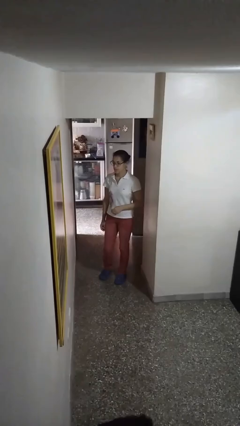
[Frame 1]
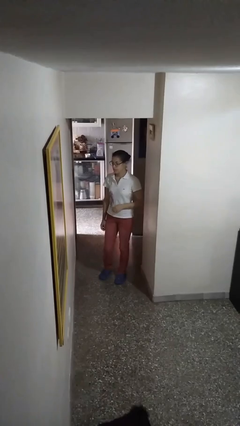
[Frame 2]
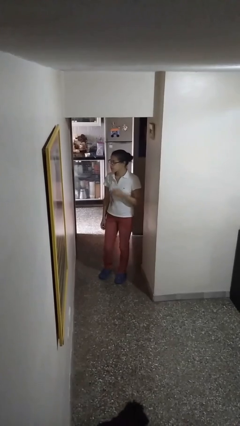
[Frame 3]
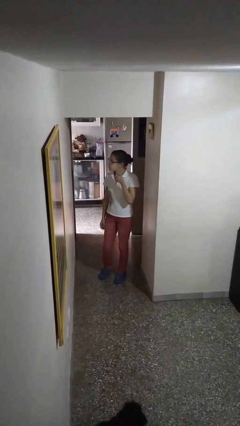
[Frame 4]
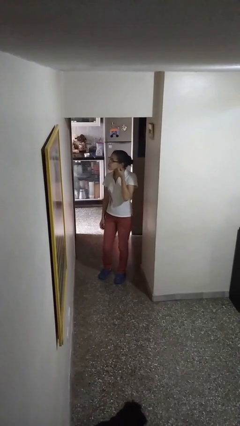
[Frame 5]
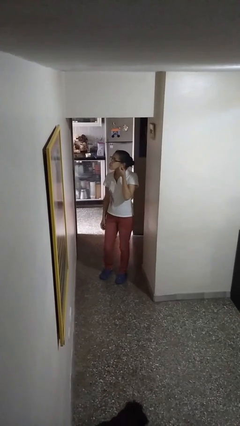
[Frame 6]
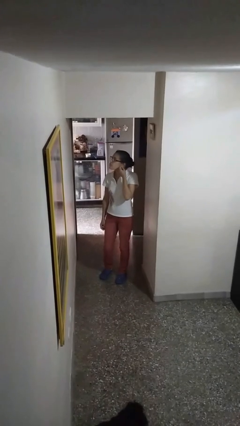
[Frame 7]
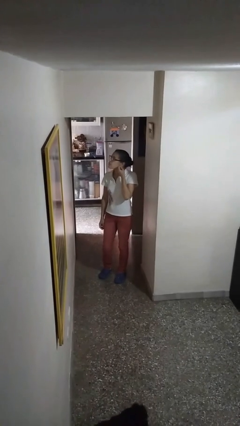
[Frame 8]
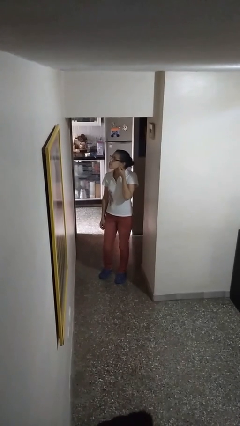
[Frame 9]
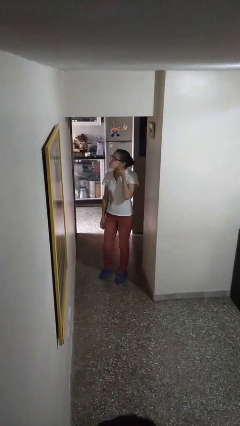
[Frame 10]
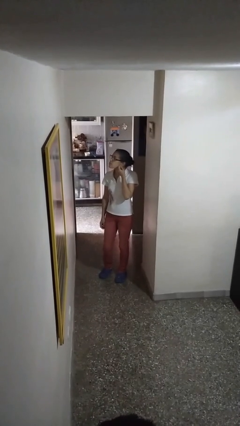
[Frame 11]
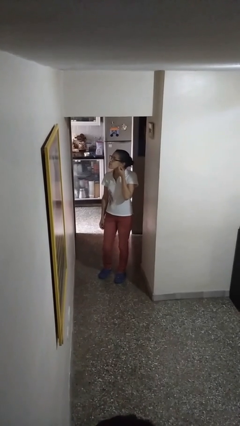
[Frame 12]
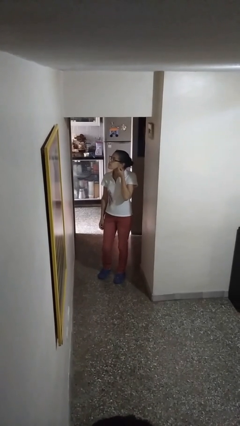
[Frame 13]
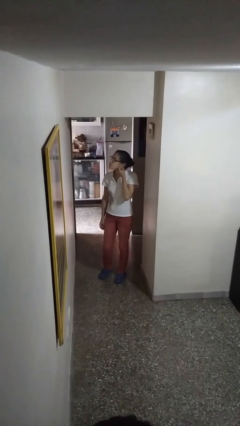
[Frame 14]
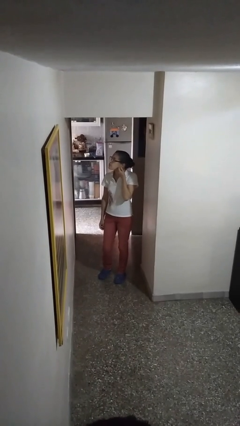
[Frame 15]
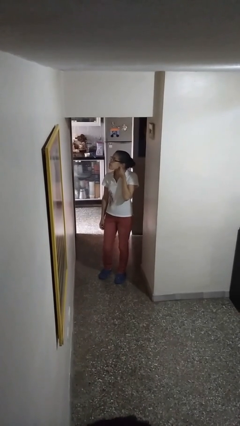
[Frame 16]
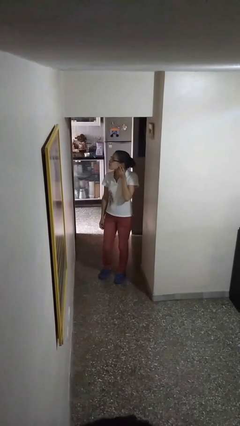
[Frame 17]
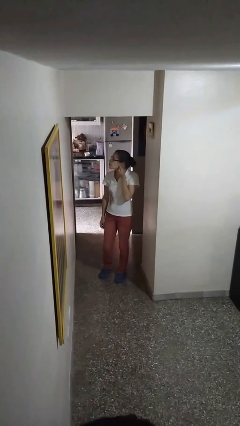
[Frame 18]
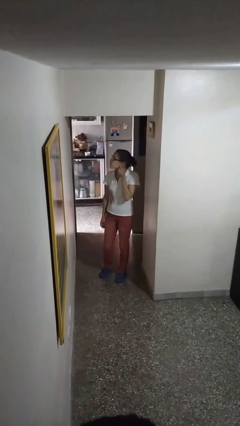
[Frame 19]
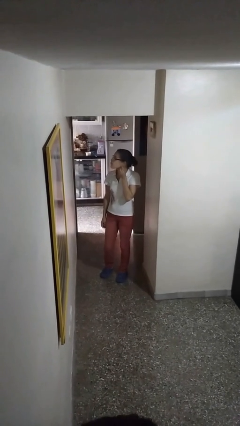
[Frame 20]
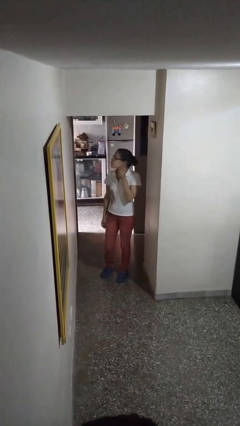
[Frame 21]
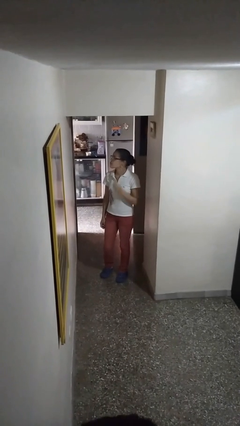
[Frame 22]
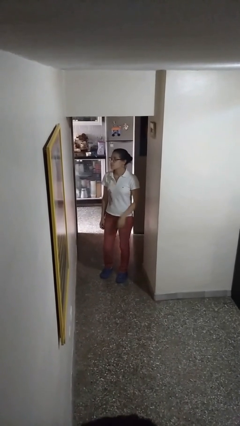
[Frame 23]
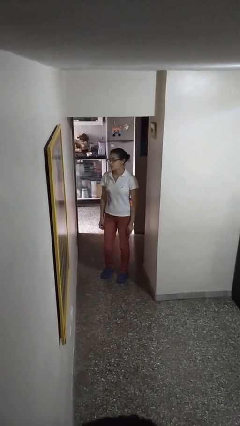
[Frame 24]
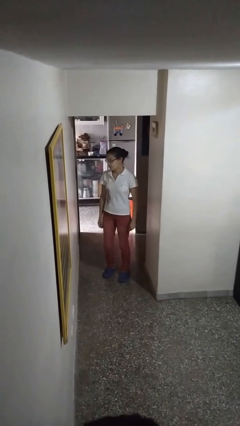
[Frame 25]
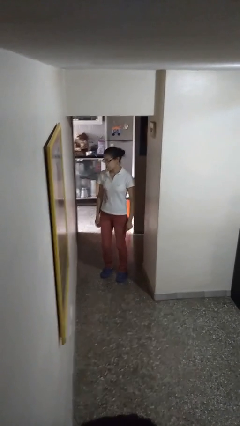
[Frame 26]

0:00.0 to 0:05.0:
person puts on earrings

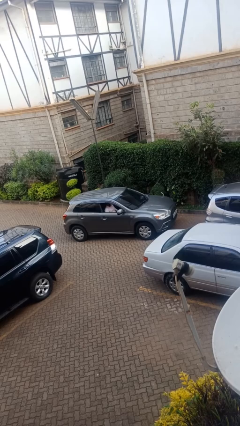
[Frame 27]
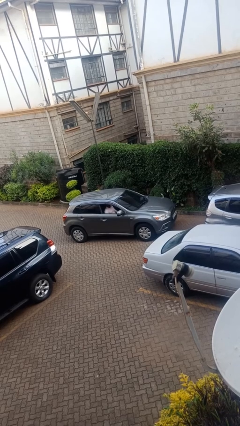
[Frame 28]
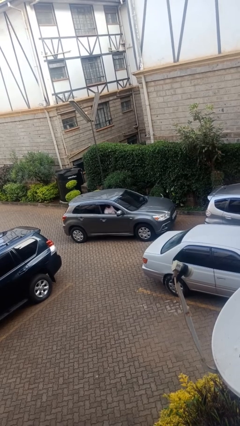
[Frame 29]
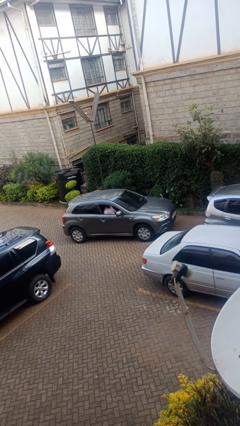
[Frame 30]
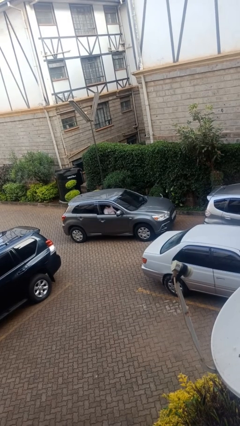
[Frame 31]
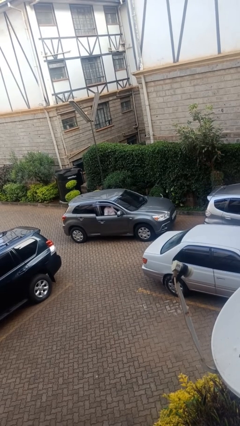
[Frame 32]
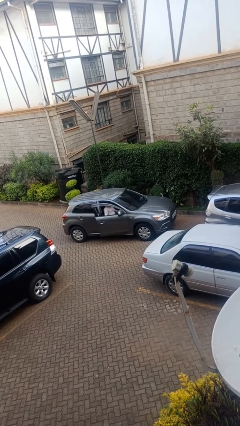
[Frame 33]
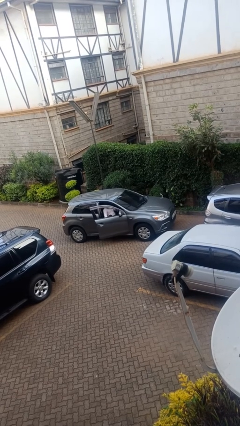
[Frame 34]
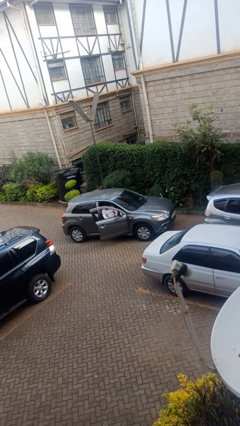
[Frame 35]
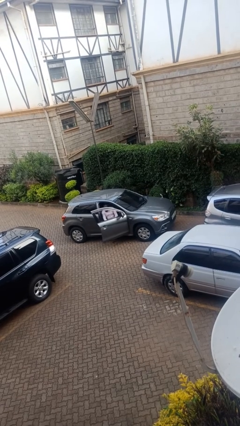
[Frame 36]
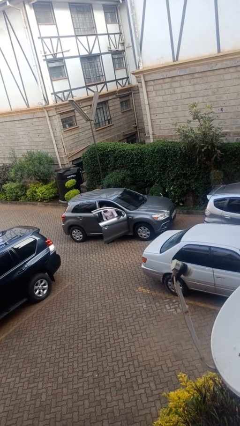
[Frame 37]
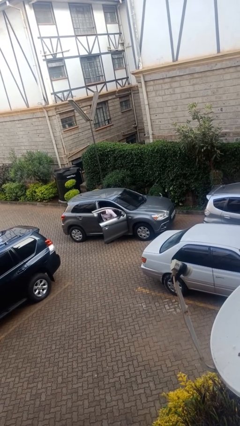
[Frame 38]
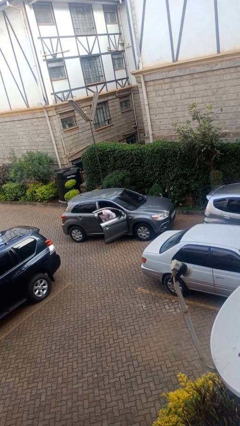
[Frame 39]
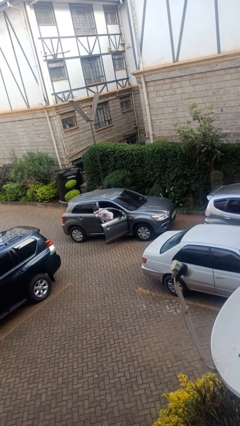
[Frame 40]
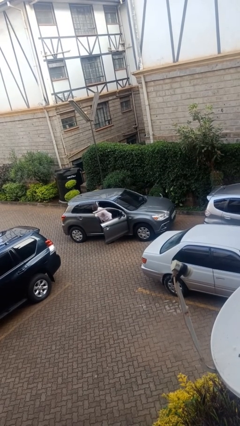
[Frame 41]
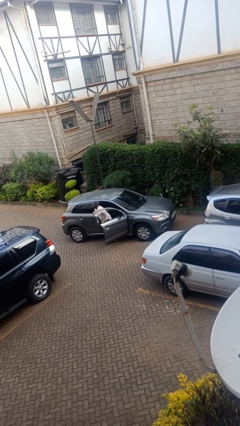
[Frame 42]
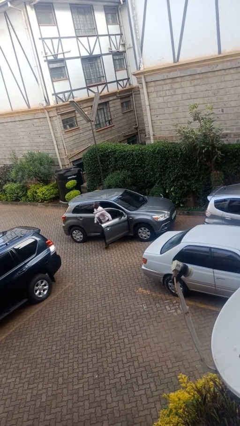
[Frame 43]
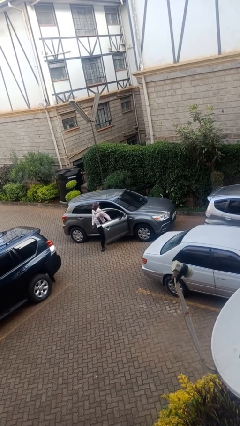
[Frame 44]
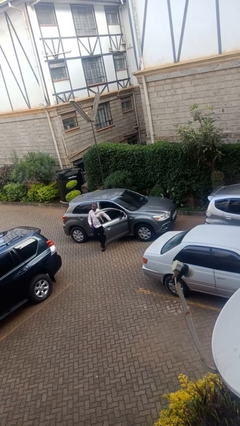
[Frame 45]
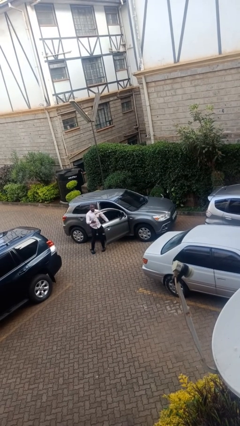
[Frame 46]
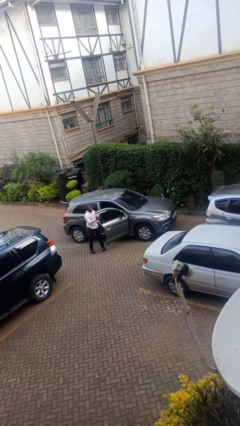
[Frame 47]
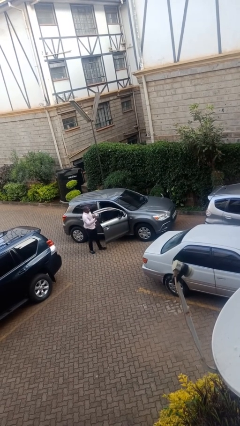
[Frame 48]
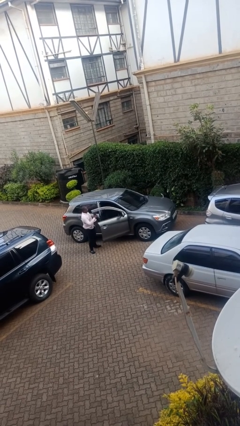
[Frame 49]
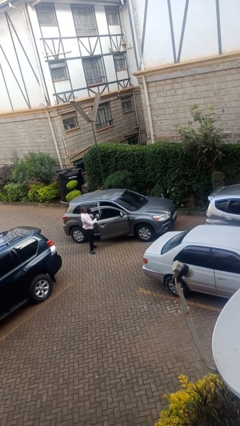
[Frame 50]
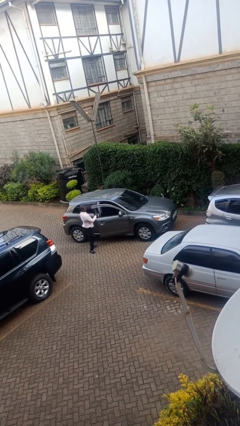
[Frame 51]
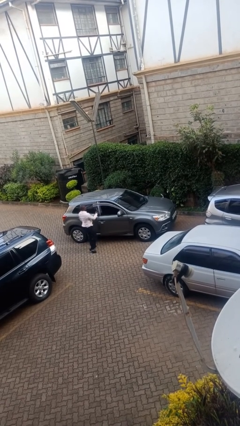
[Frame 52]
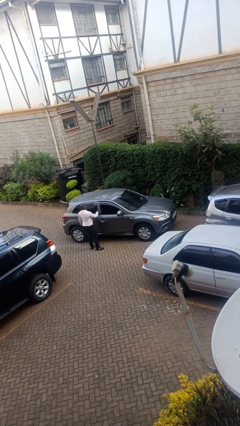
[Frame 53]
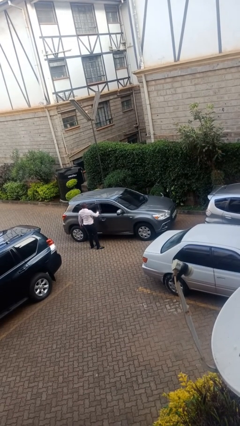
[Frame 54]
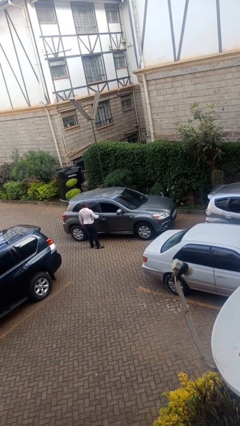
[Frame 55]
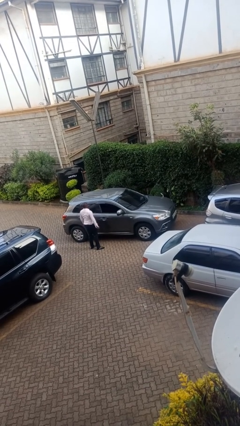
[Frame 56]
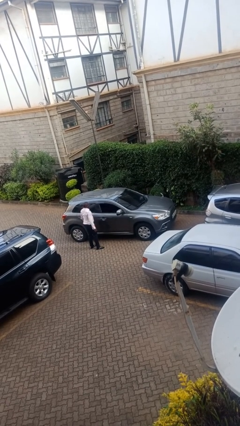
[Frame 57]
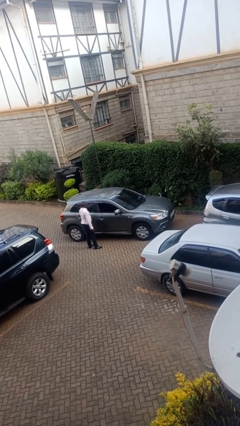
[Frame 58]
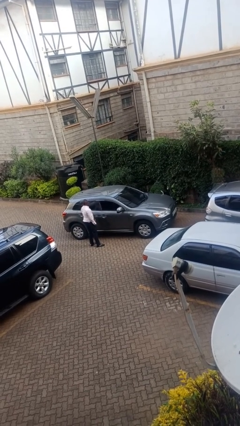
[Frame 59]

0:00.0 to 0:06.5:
car drops off person

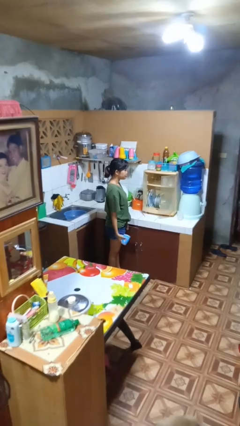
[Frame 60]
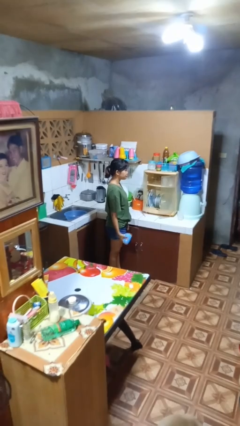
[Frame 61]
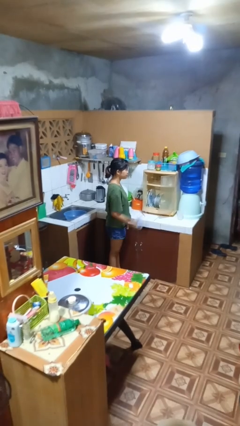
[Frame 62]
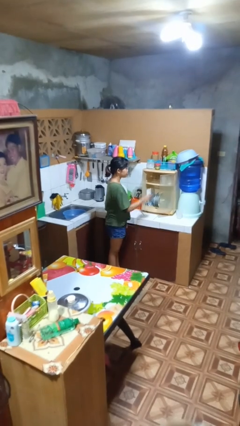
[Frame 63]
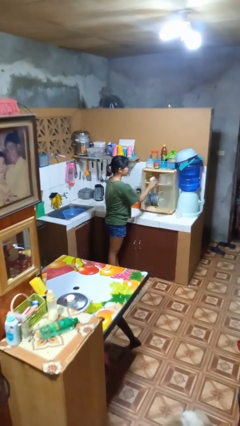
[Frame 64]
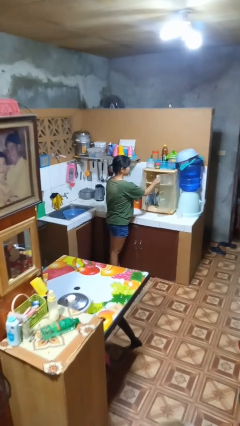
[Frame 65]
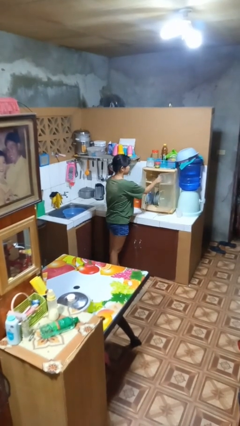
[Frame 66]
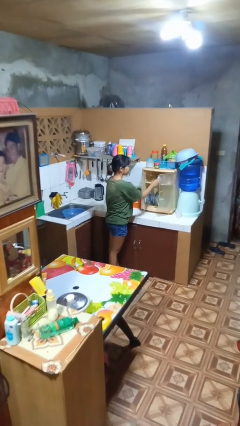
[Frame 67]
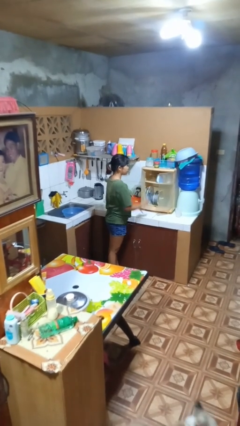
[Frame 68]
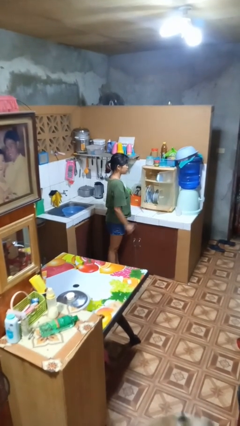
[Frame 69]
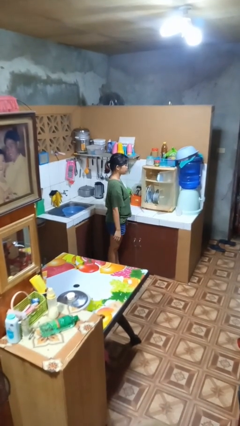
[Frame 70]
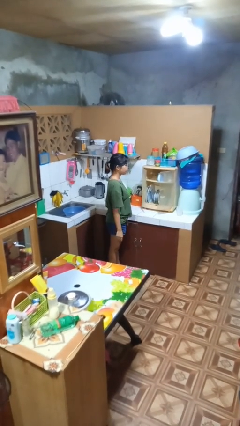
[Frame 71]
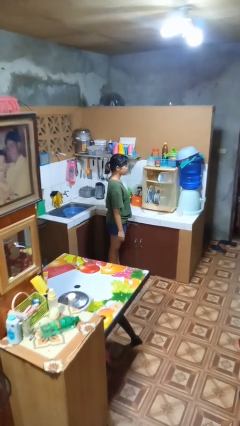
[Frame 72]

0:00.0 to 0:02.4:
person puts object in cabinet

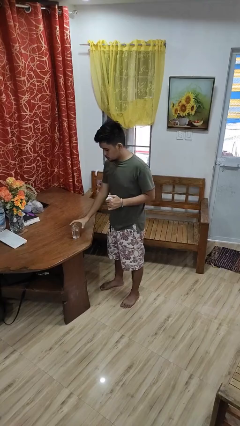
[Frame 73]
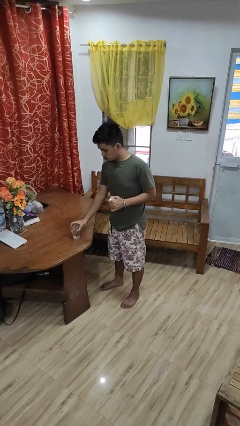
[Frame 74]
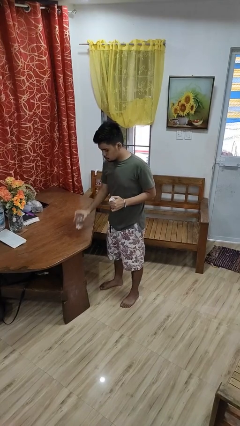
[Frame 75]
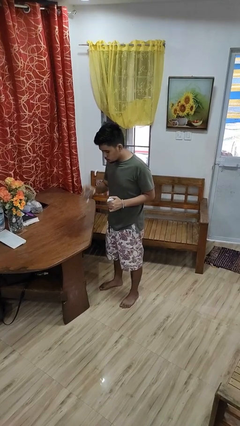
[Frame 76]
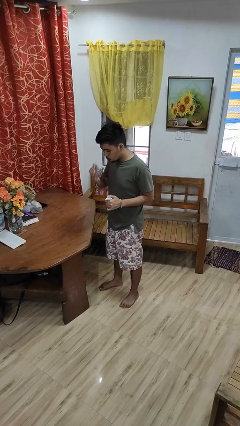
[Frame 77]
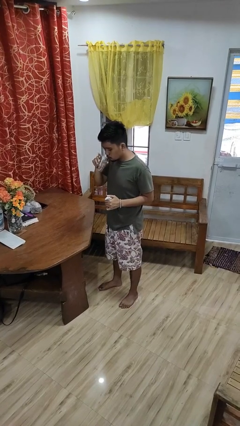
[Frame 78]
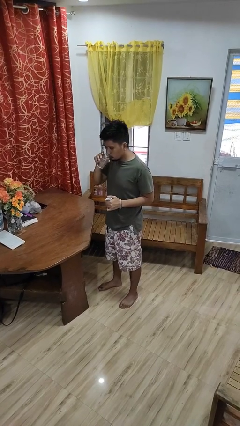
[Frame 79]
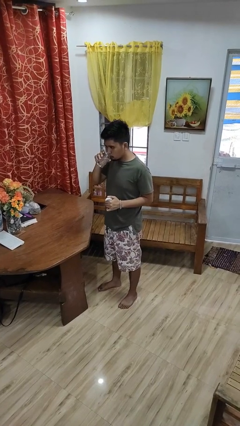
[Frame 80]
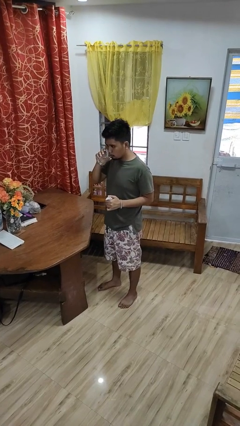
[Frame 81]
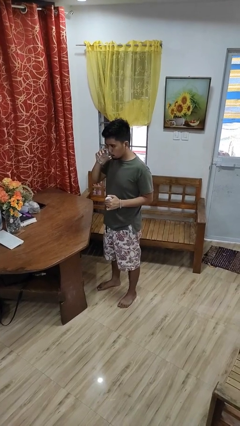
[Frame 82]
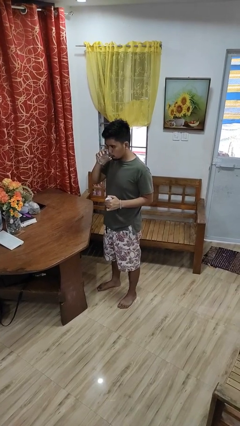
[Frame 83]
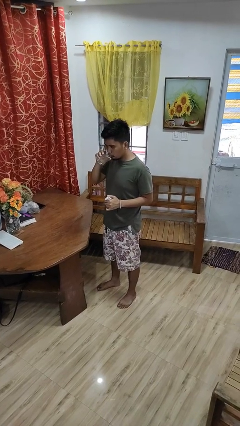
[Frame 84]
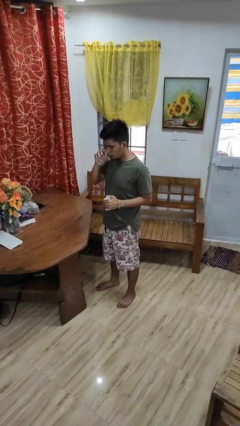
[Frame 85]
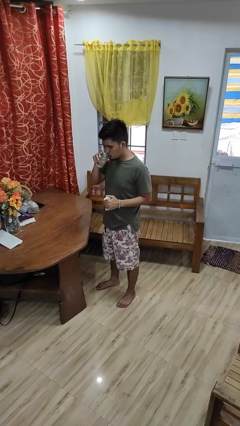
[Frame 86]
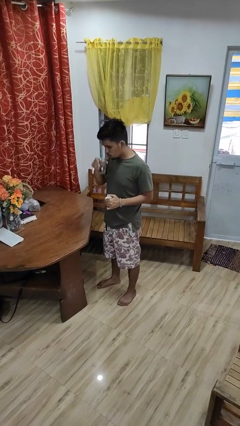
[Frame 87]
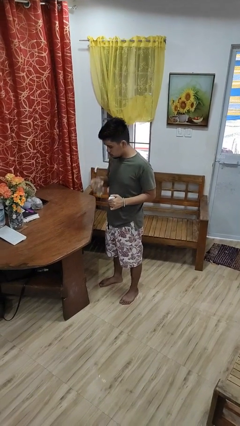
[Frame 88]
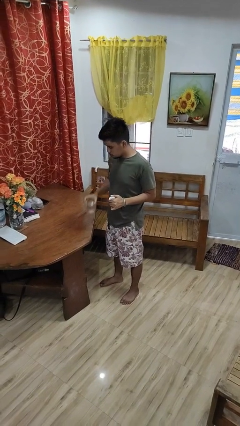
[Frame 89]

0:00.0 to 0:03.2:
person drinks from cup

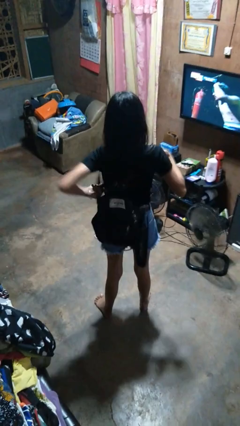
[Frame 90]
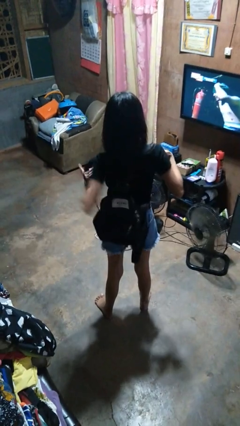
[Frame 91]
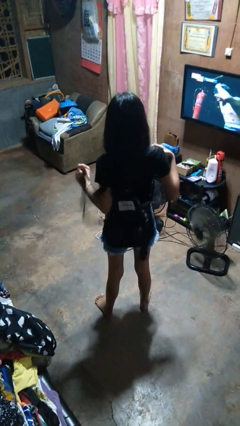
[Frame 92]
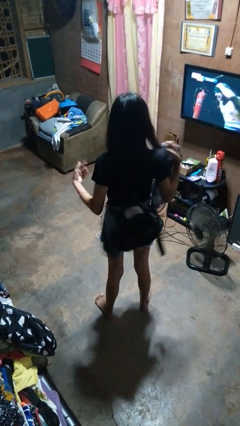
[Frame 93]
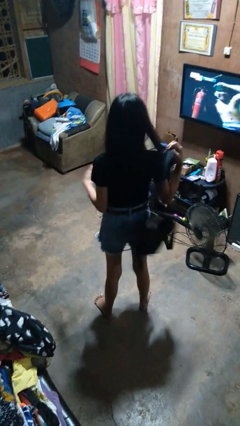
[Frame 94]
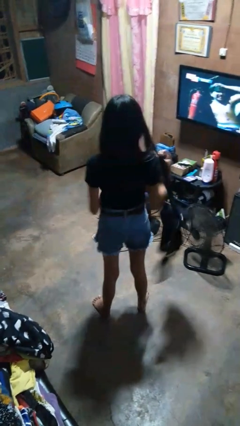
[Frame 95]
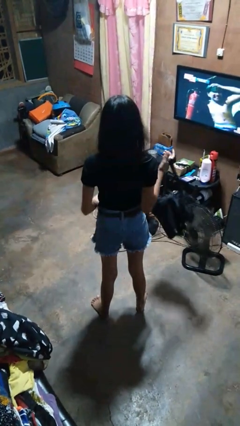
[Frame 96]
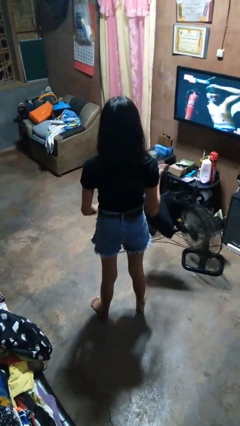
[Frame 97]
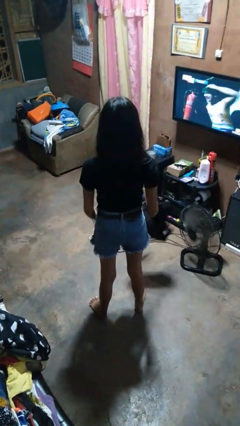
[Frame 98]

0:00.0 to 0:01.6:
person takes off backpack
